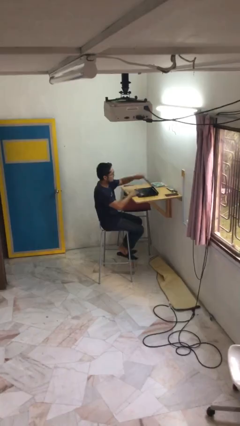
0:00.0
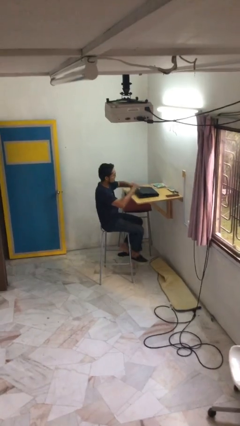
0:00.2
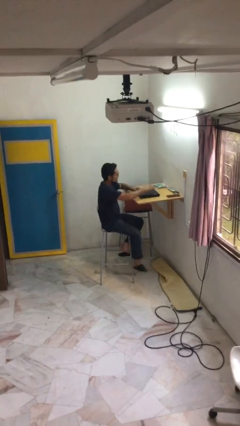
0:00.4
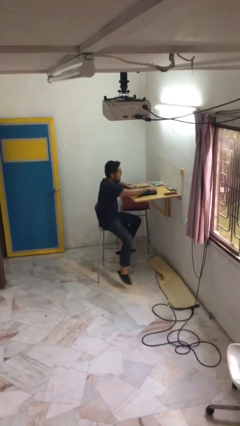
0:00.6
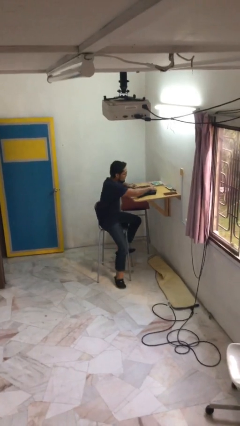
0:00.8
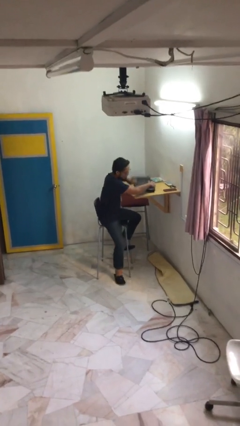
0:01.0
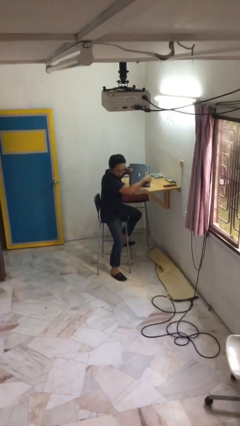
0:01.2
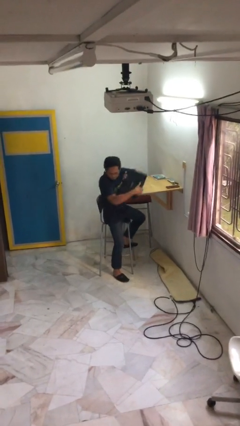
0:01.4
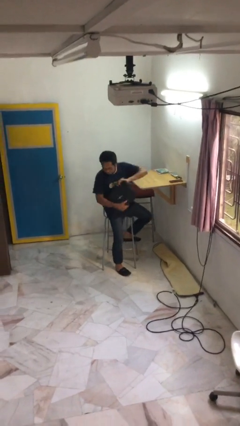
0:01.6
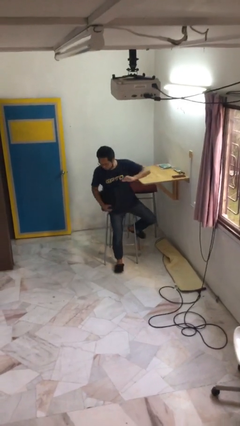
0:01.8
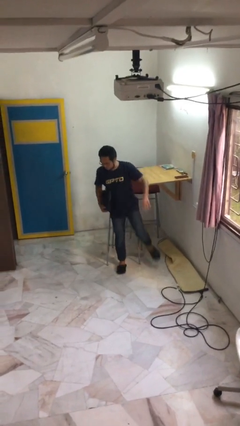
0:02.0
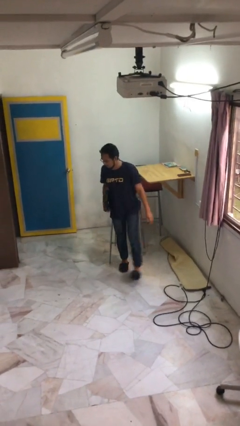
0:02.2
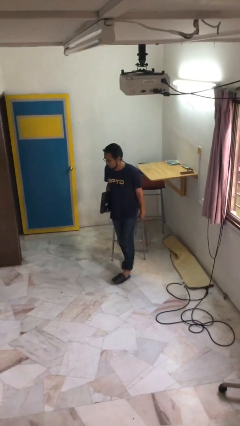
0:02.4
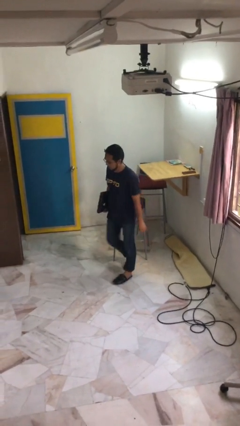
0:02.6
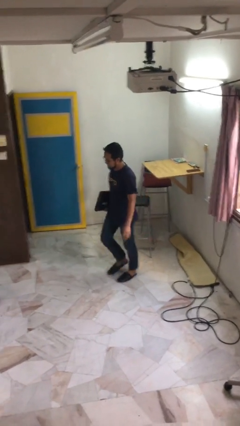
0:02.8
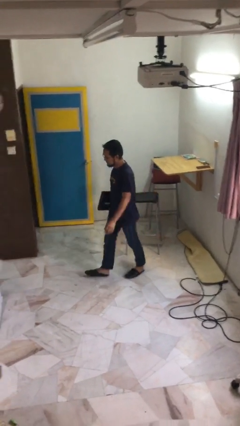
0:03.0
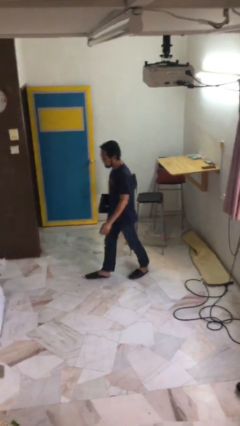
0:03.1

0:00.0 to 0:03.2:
person stands up

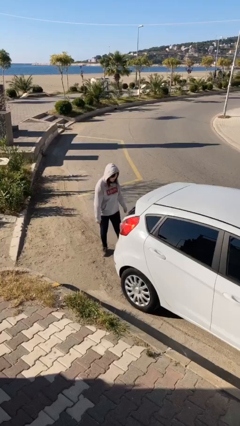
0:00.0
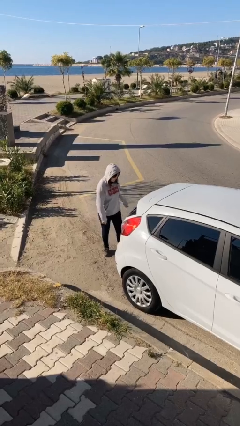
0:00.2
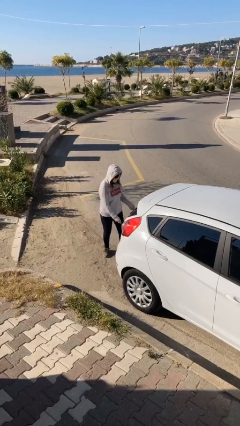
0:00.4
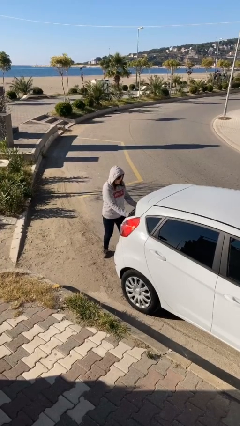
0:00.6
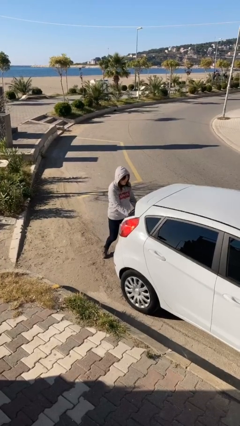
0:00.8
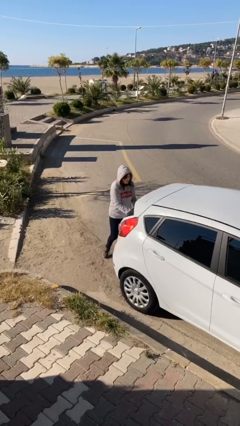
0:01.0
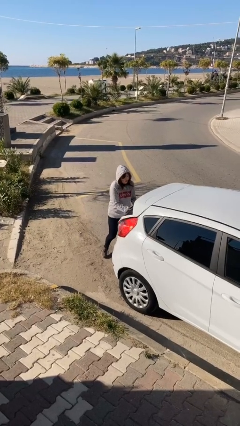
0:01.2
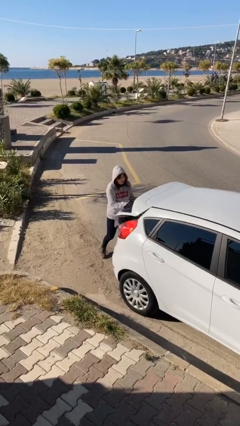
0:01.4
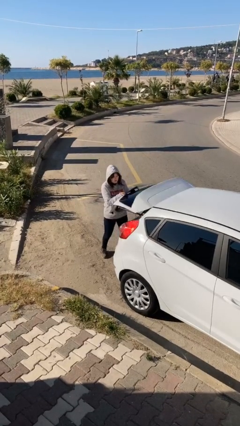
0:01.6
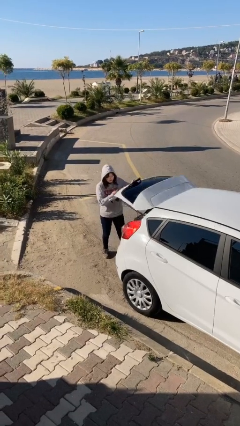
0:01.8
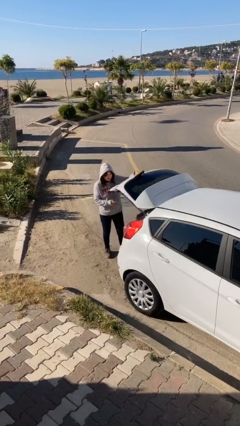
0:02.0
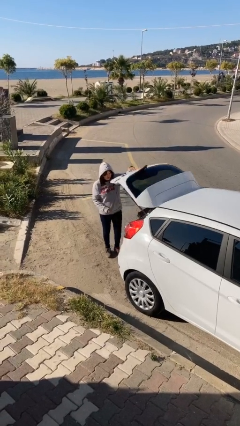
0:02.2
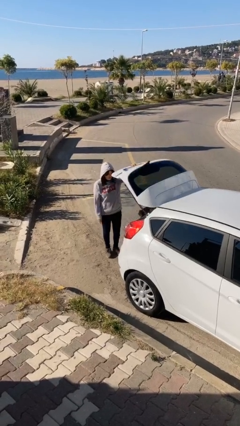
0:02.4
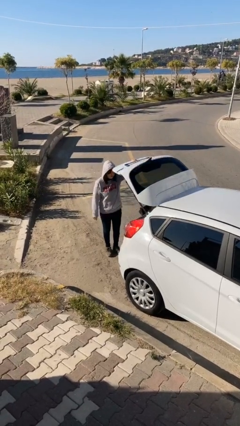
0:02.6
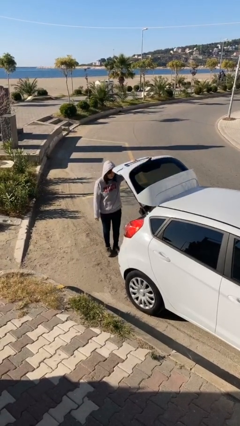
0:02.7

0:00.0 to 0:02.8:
person opens car trunk

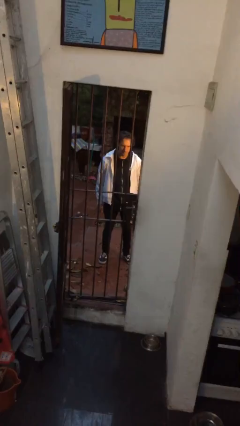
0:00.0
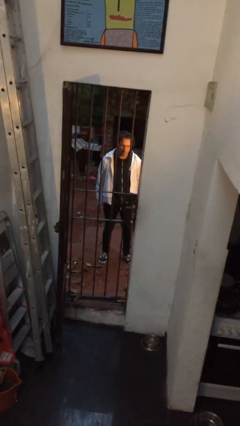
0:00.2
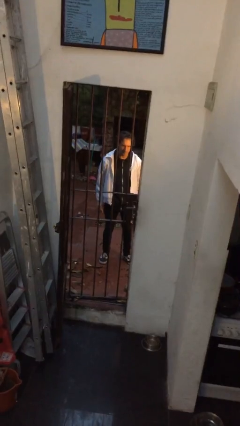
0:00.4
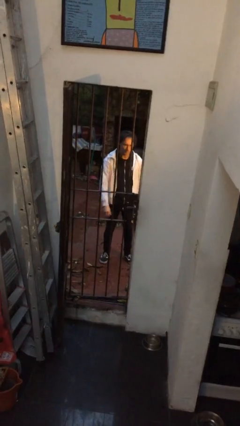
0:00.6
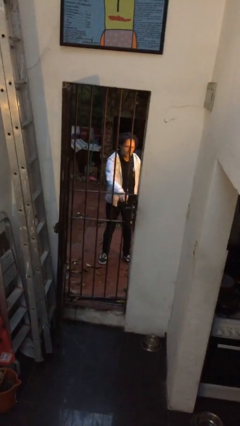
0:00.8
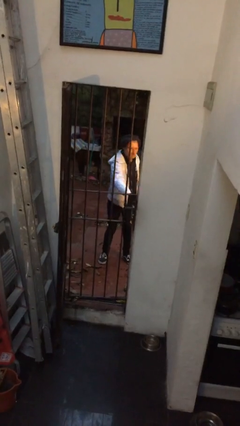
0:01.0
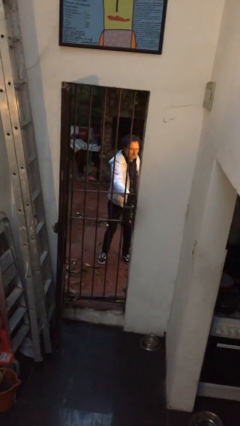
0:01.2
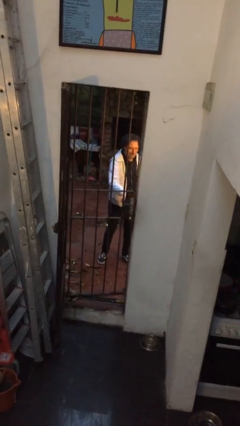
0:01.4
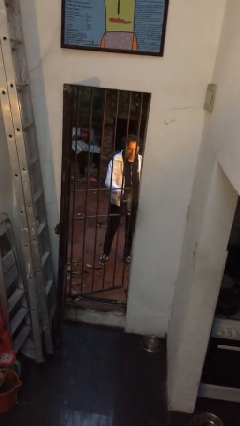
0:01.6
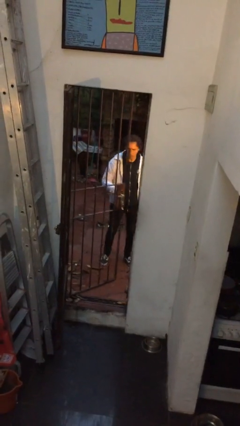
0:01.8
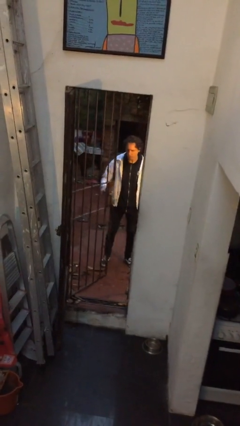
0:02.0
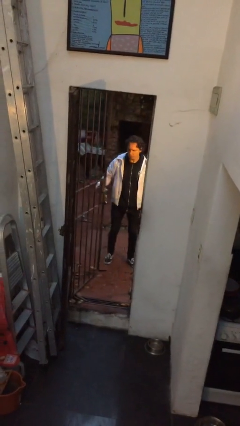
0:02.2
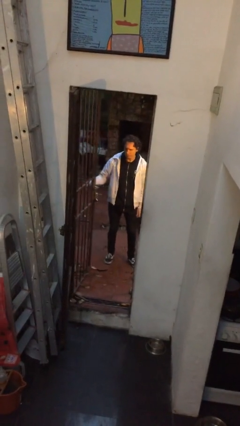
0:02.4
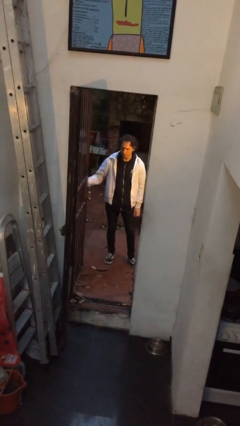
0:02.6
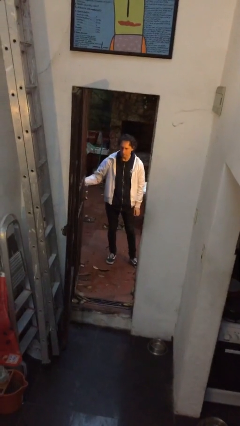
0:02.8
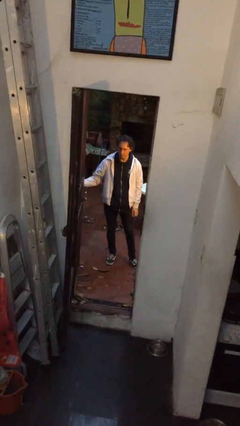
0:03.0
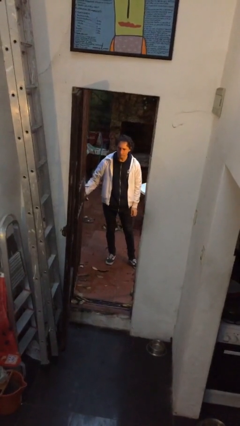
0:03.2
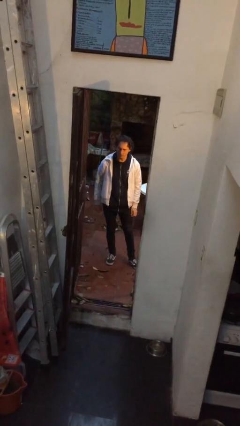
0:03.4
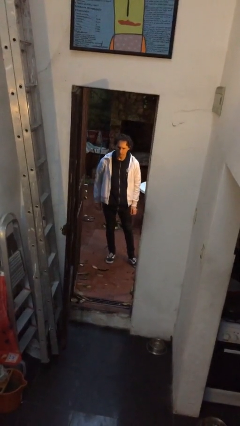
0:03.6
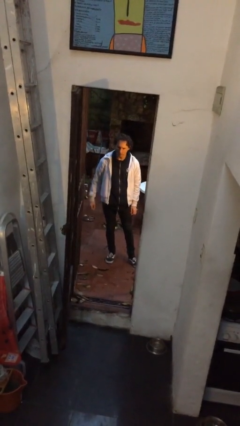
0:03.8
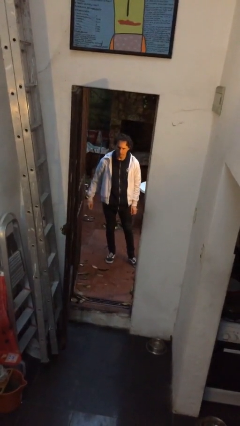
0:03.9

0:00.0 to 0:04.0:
person opens gate

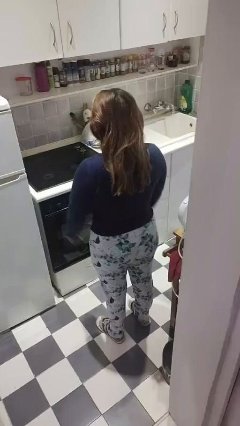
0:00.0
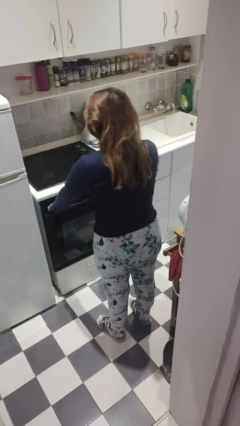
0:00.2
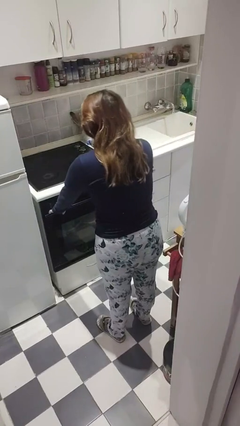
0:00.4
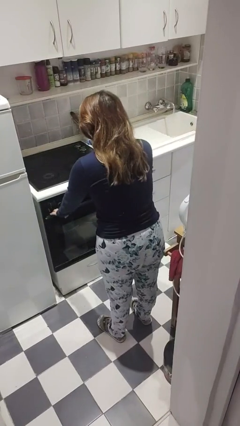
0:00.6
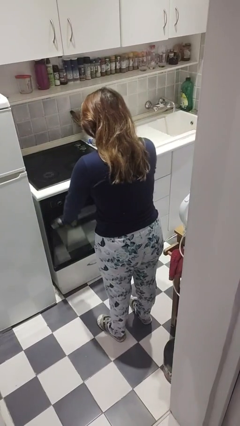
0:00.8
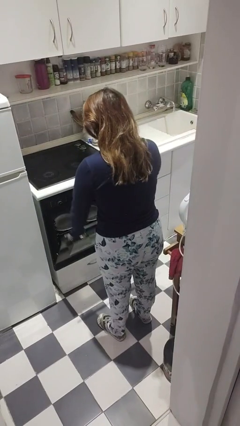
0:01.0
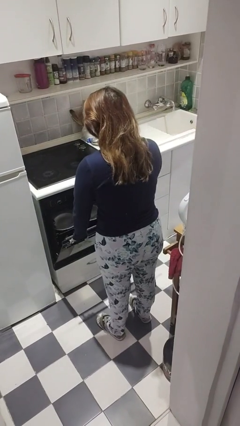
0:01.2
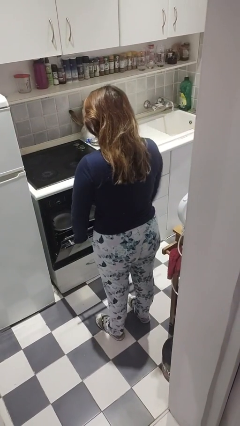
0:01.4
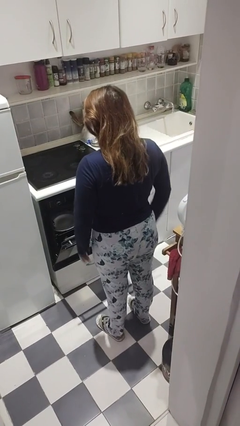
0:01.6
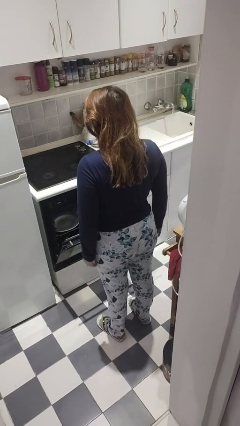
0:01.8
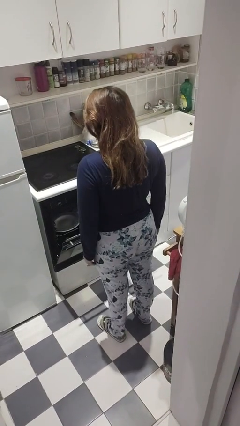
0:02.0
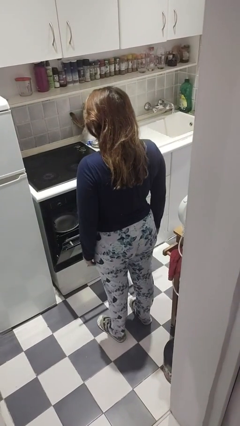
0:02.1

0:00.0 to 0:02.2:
person opens dishwasher

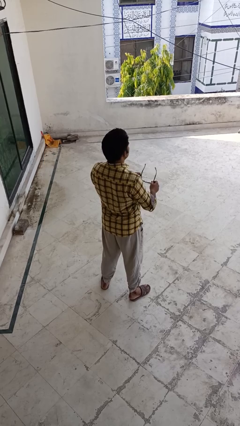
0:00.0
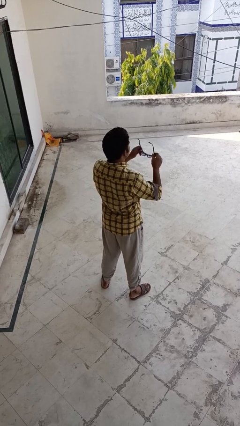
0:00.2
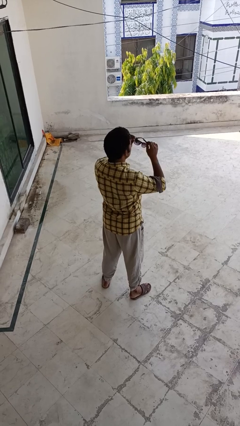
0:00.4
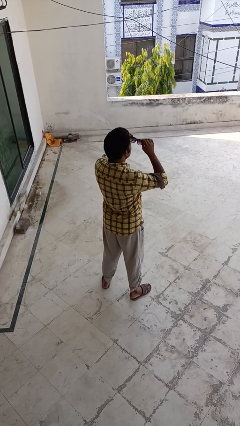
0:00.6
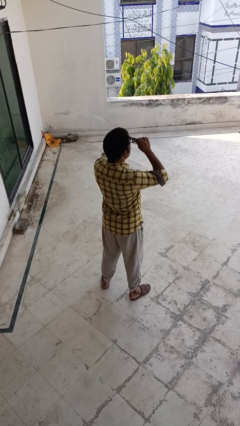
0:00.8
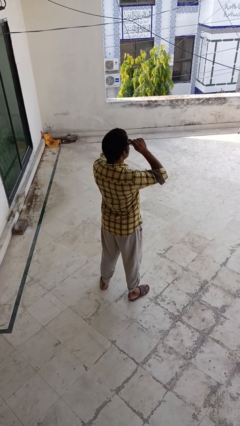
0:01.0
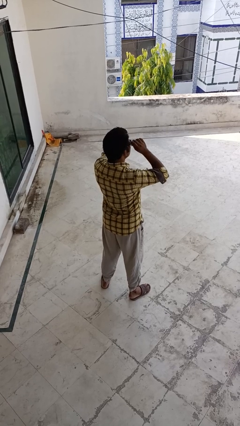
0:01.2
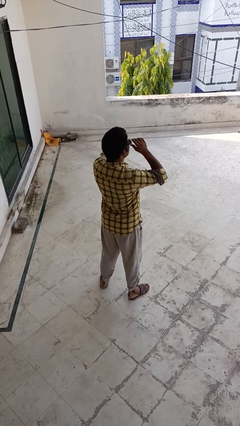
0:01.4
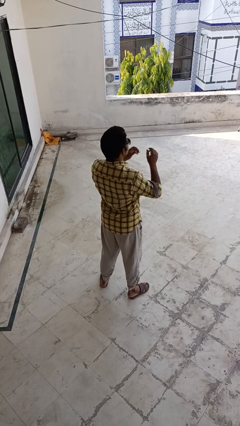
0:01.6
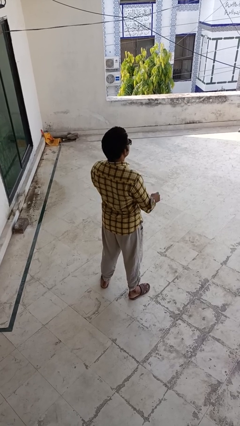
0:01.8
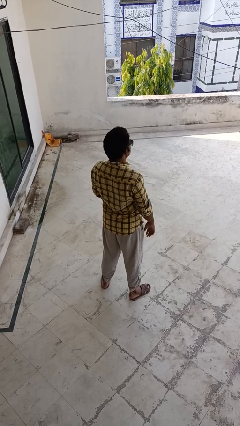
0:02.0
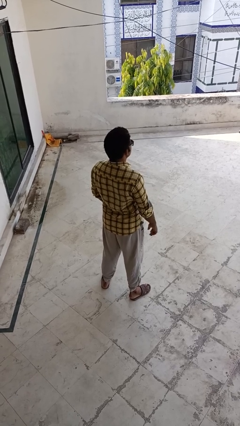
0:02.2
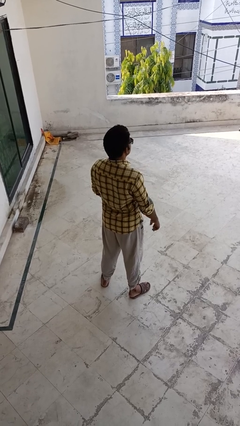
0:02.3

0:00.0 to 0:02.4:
person puts on sunglasses

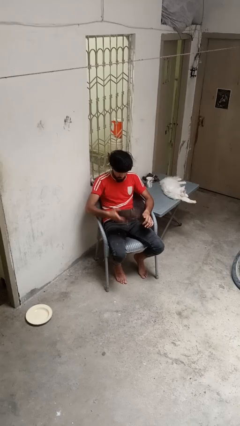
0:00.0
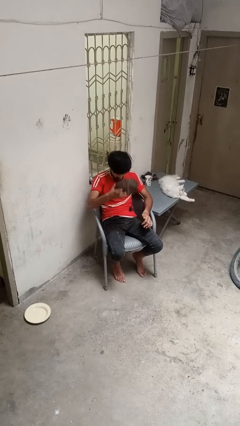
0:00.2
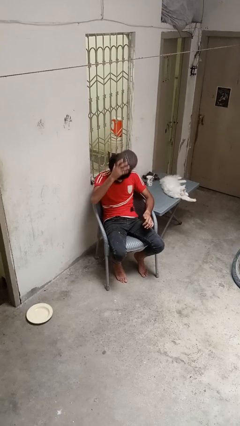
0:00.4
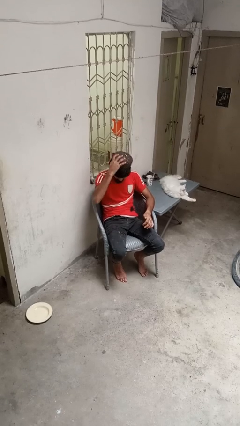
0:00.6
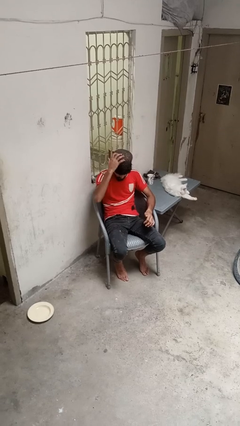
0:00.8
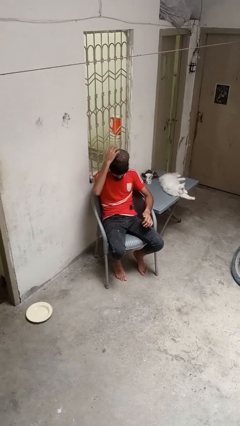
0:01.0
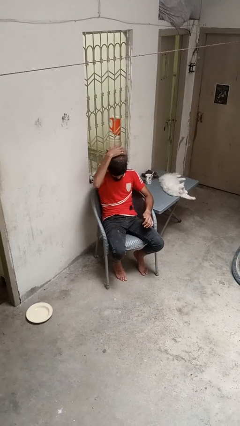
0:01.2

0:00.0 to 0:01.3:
person puts on hat

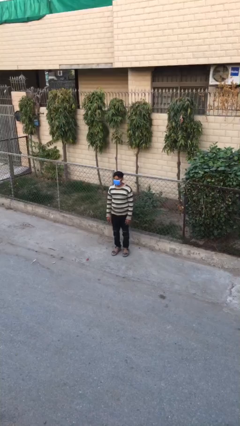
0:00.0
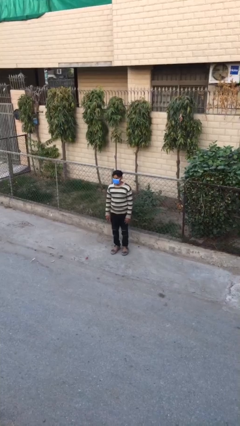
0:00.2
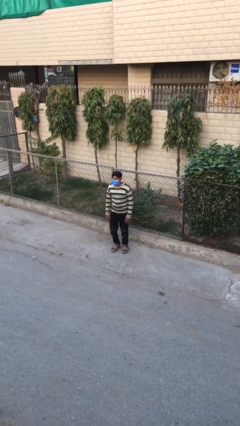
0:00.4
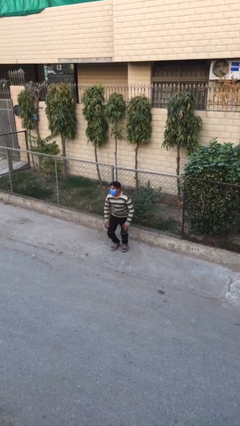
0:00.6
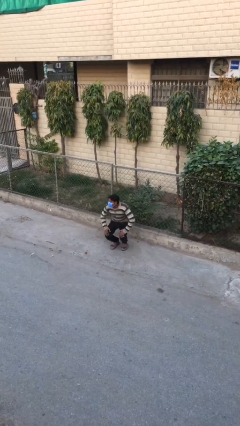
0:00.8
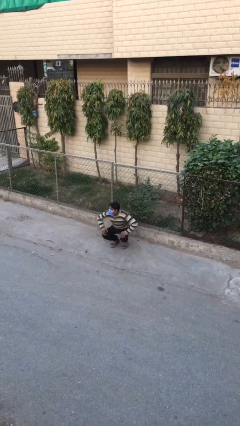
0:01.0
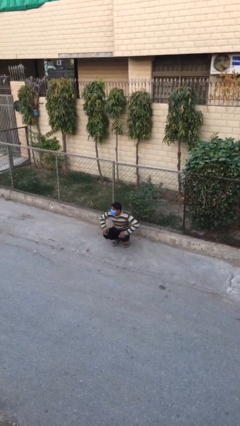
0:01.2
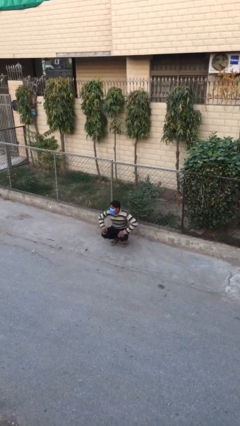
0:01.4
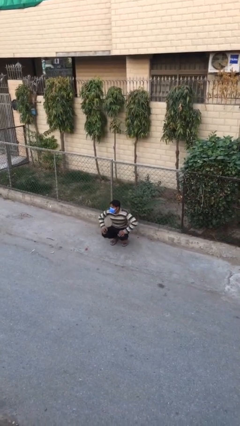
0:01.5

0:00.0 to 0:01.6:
person sits down
